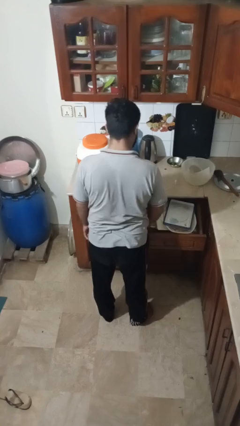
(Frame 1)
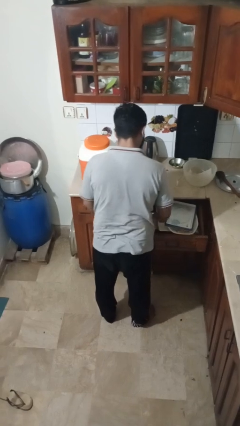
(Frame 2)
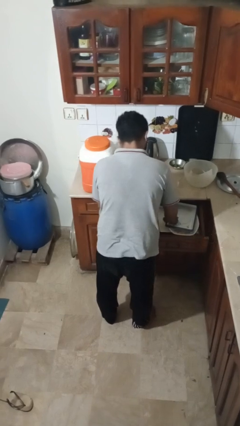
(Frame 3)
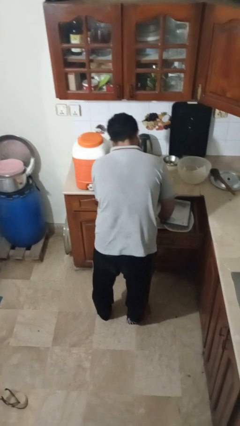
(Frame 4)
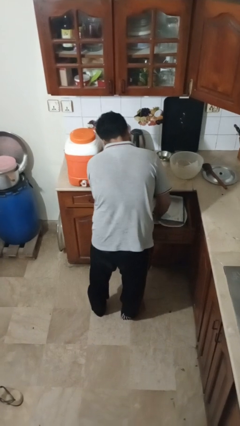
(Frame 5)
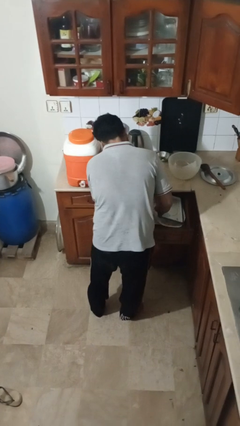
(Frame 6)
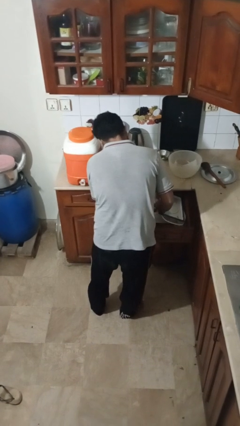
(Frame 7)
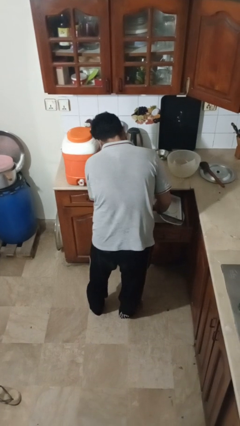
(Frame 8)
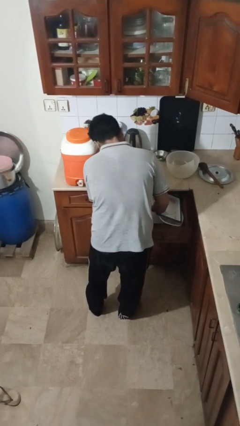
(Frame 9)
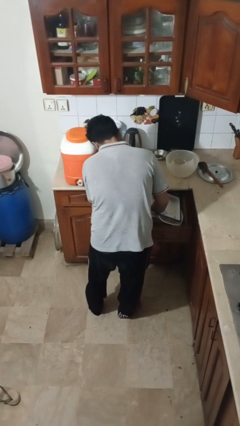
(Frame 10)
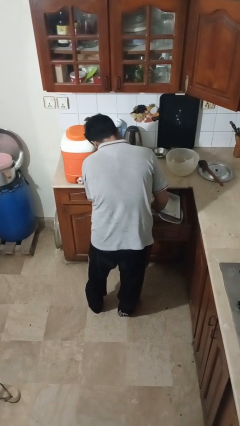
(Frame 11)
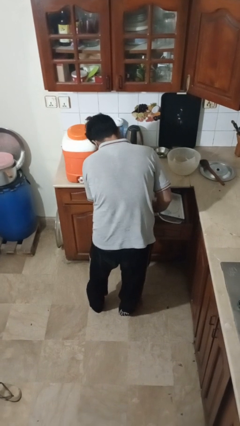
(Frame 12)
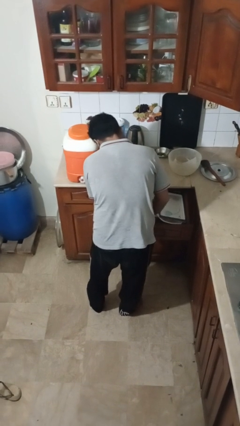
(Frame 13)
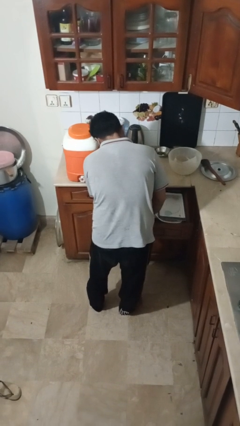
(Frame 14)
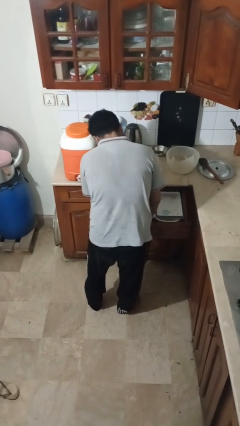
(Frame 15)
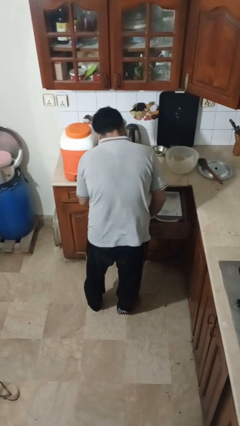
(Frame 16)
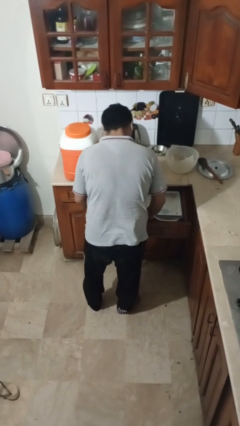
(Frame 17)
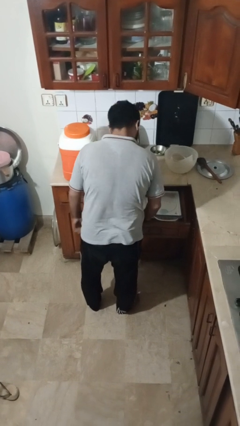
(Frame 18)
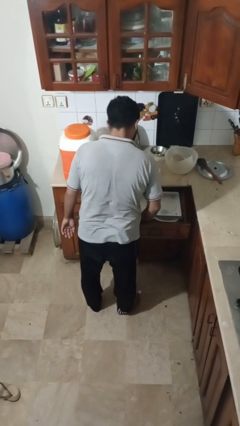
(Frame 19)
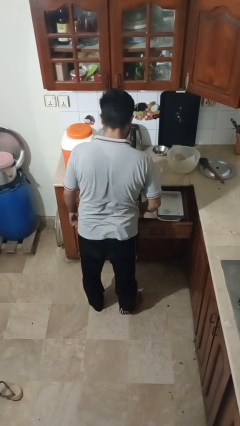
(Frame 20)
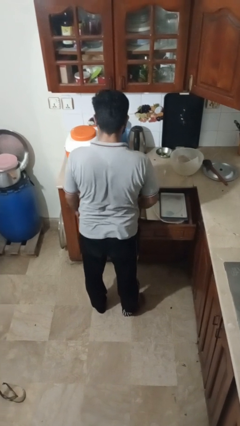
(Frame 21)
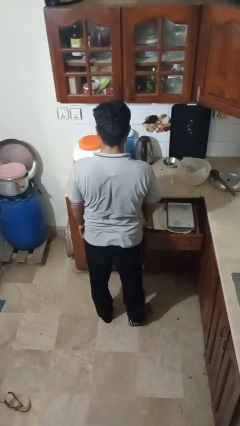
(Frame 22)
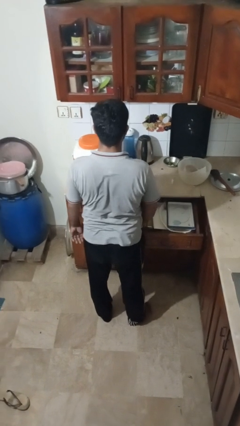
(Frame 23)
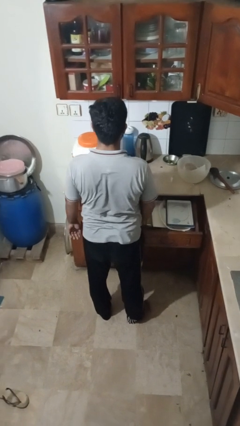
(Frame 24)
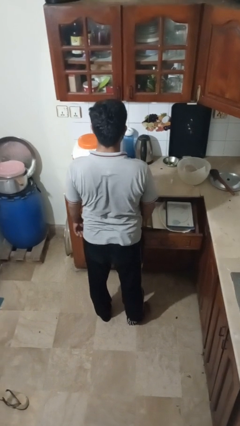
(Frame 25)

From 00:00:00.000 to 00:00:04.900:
person searches in kitchen drawer

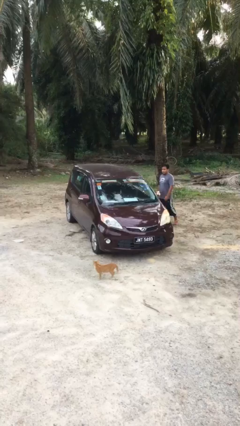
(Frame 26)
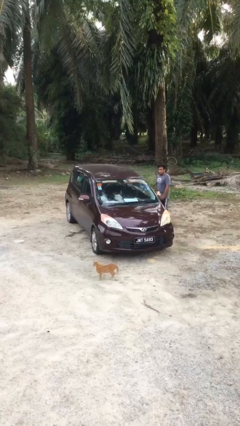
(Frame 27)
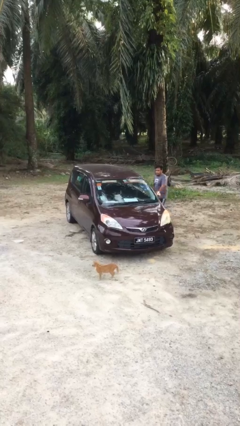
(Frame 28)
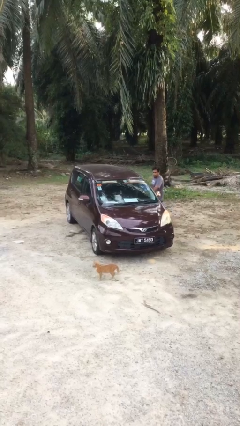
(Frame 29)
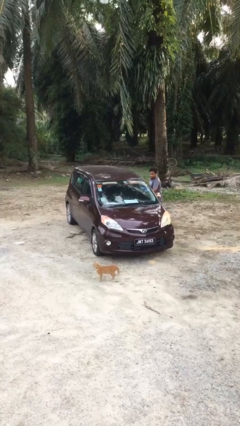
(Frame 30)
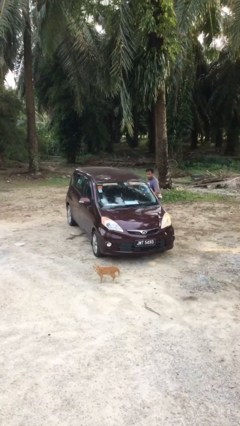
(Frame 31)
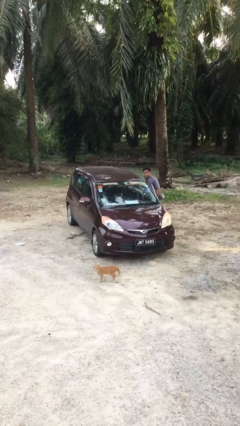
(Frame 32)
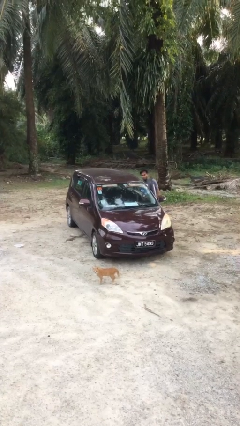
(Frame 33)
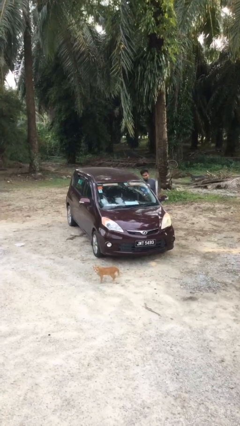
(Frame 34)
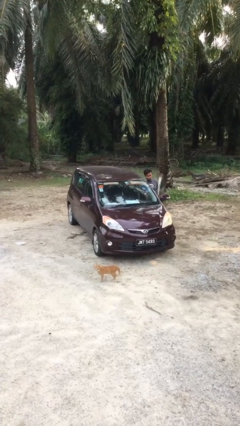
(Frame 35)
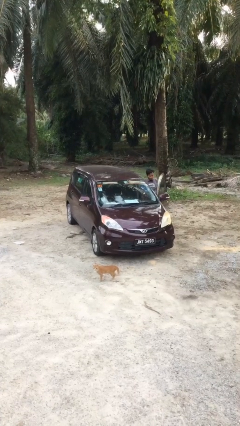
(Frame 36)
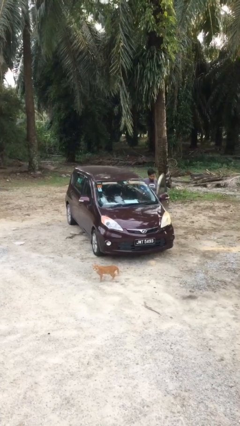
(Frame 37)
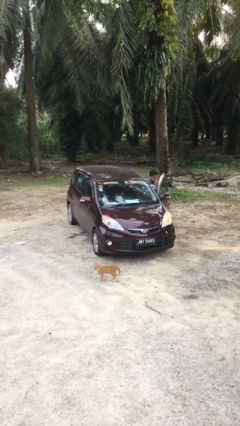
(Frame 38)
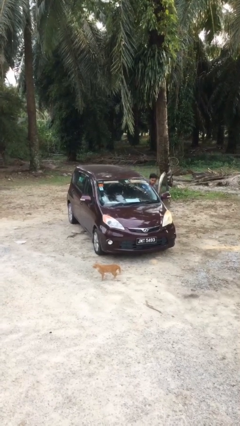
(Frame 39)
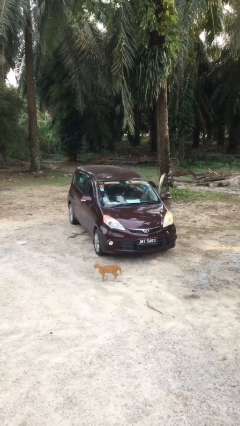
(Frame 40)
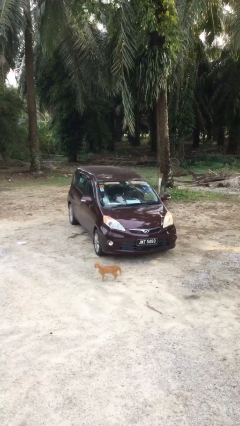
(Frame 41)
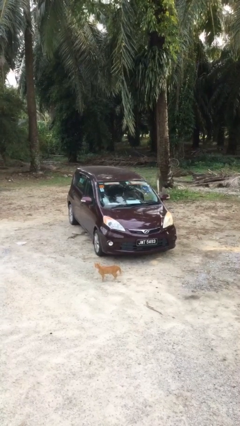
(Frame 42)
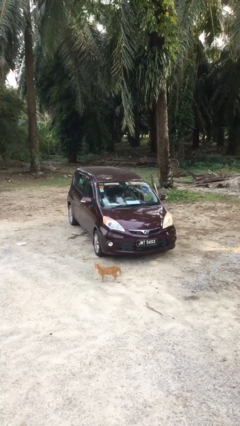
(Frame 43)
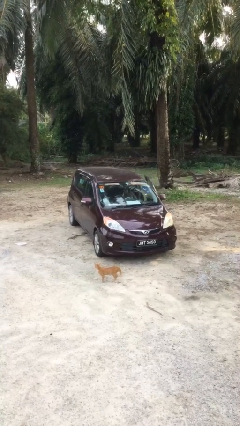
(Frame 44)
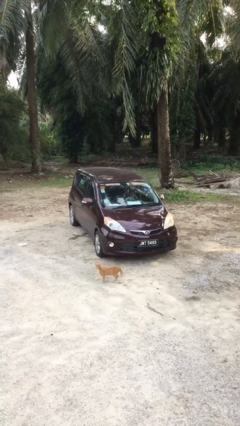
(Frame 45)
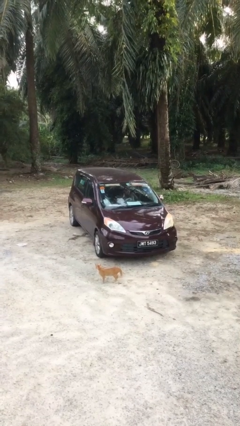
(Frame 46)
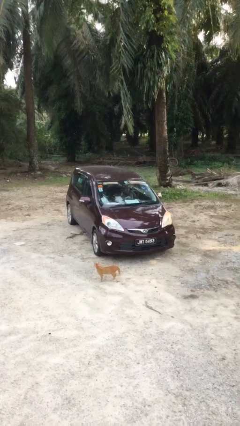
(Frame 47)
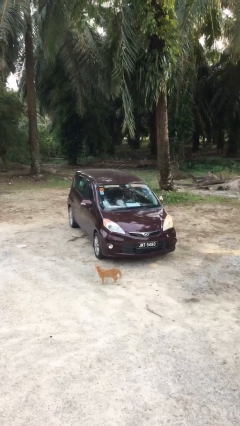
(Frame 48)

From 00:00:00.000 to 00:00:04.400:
car picks up person

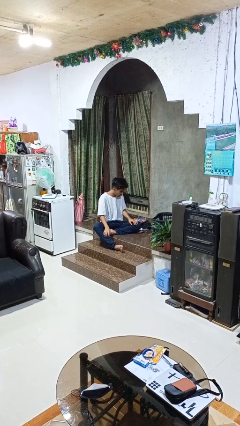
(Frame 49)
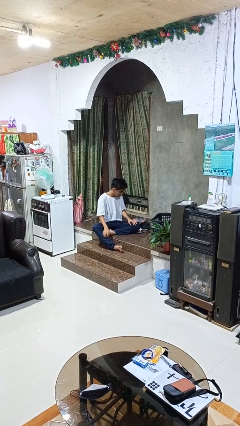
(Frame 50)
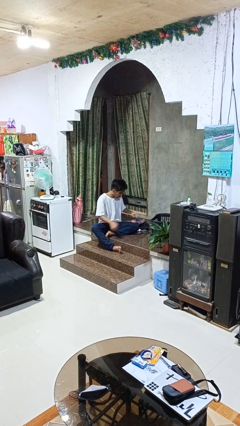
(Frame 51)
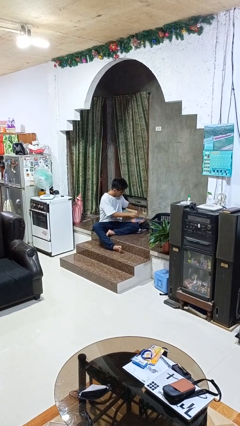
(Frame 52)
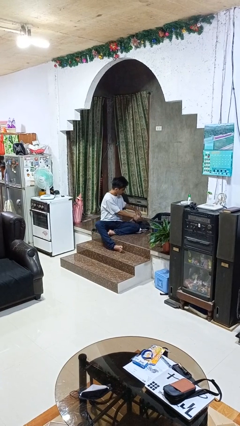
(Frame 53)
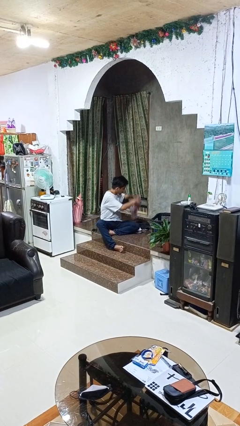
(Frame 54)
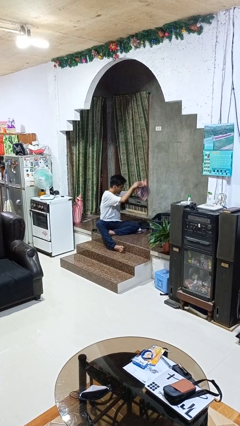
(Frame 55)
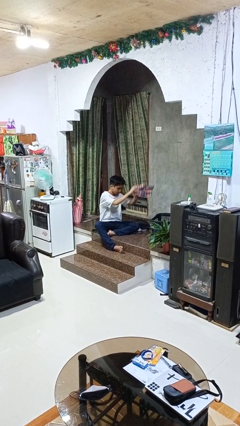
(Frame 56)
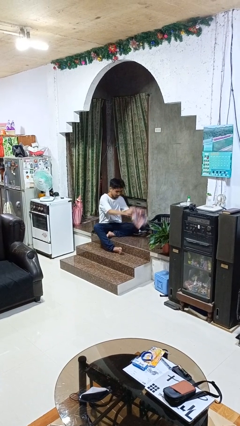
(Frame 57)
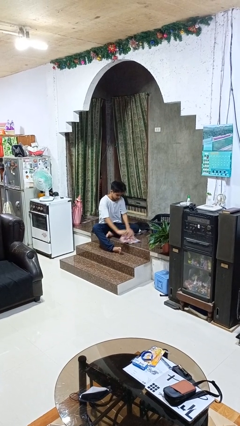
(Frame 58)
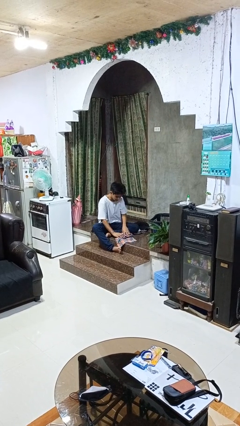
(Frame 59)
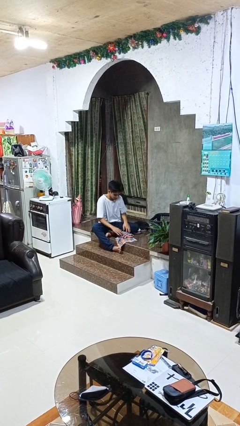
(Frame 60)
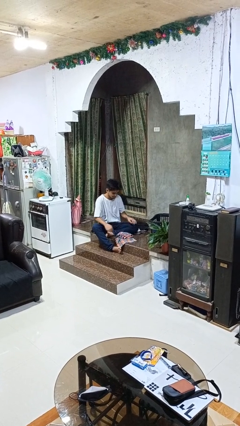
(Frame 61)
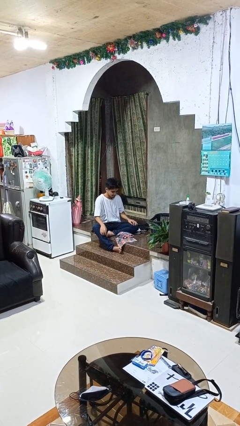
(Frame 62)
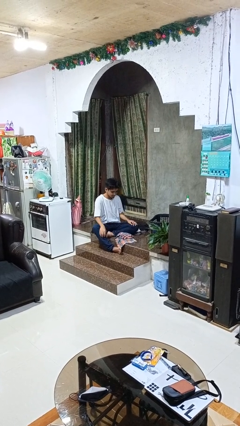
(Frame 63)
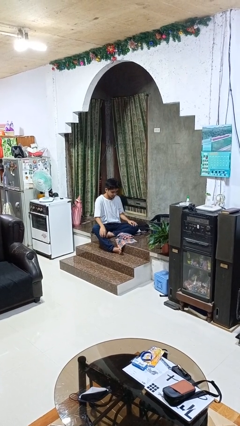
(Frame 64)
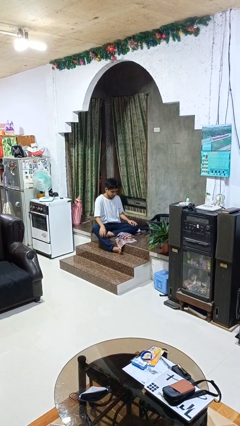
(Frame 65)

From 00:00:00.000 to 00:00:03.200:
person folds pants

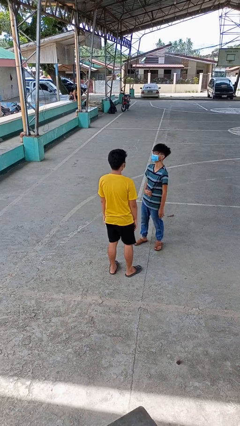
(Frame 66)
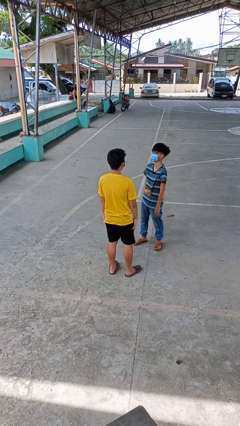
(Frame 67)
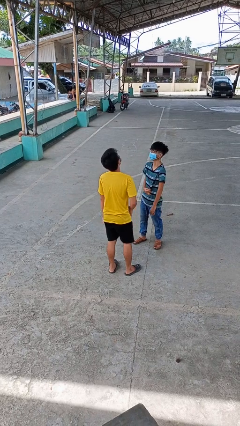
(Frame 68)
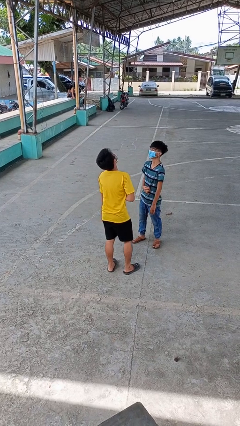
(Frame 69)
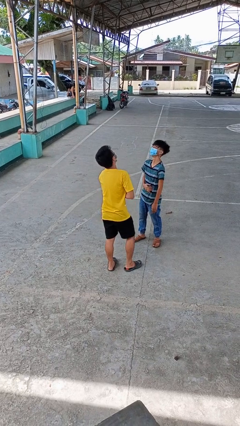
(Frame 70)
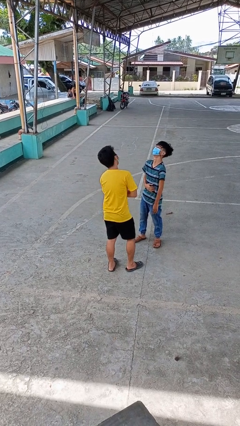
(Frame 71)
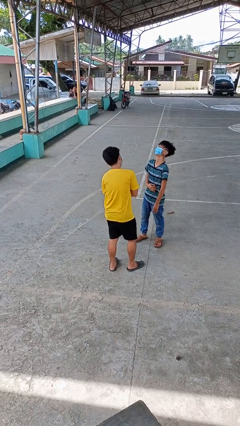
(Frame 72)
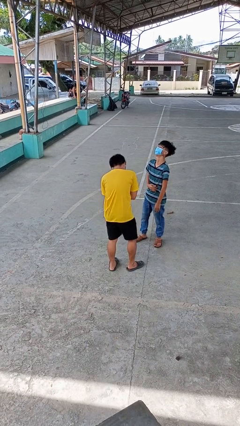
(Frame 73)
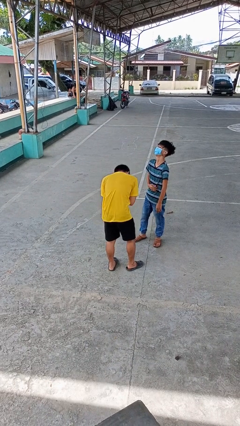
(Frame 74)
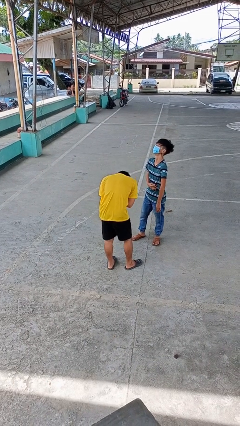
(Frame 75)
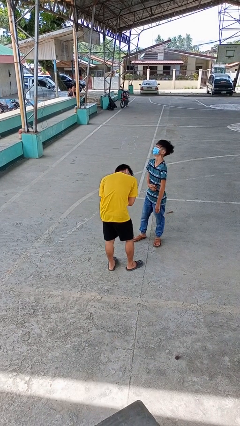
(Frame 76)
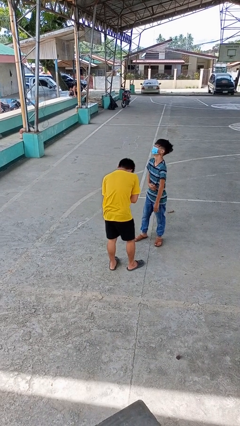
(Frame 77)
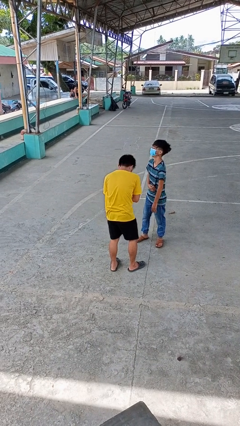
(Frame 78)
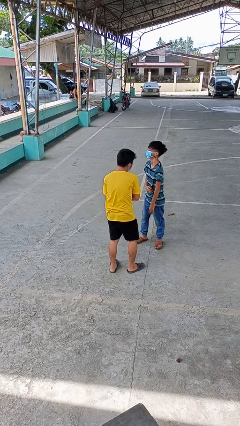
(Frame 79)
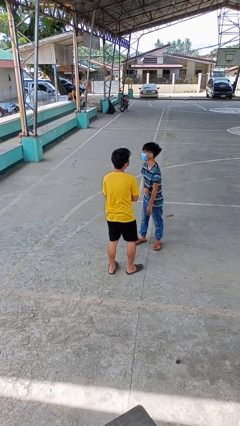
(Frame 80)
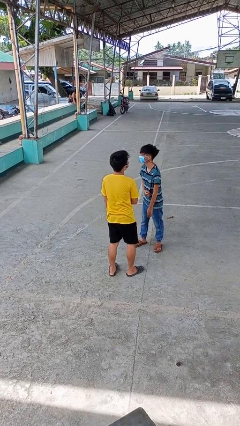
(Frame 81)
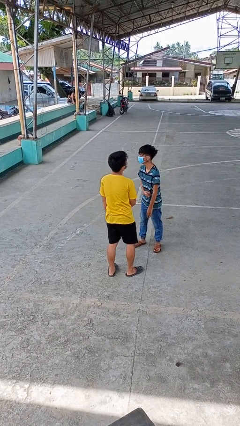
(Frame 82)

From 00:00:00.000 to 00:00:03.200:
person laughs with person

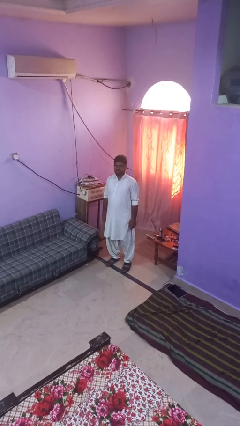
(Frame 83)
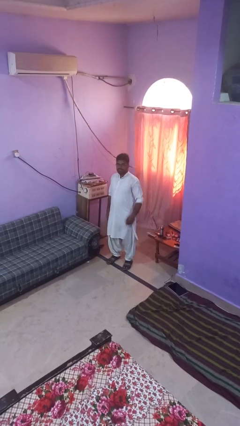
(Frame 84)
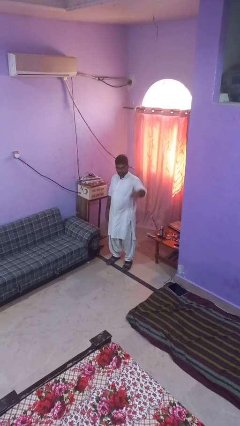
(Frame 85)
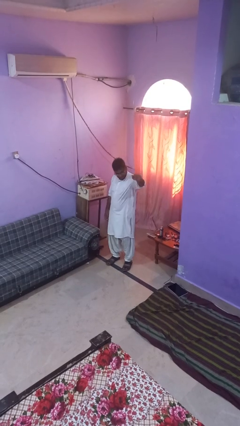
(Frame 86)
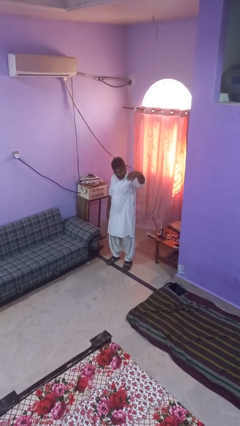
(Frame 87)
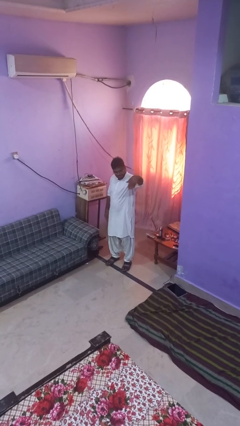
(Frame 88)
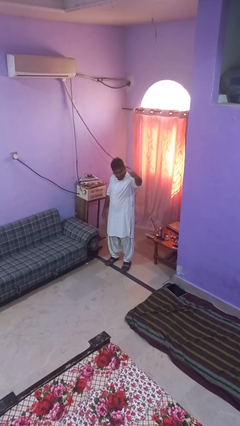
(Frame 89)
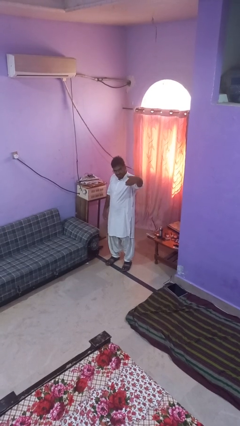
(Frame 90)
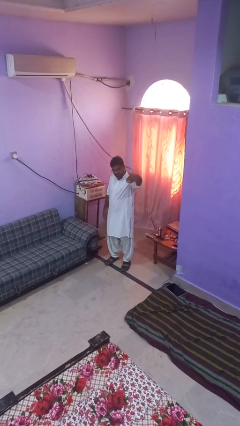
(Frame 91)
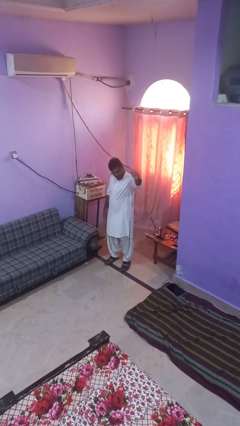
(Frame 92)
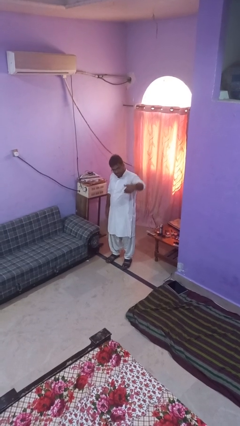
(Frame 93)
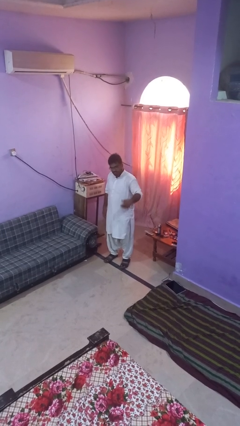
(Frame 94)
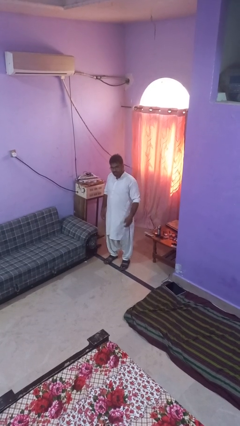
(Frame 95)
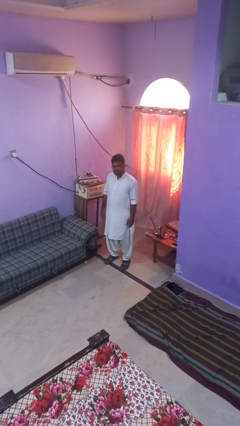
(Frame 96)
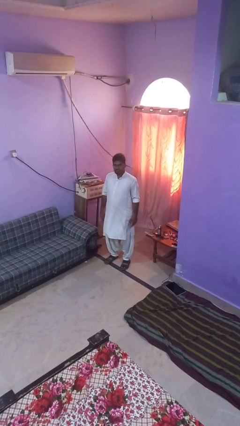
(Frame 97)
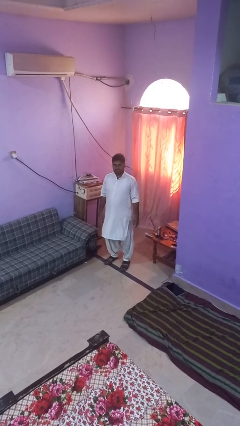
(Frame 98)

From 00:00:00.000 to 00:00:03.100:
person gestures come here
